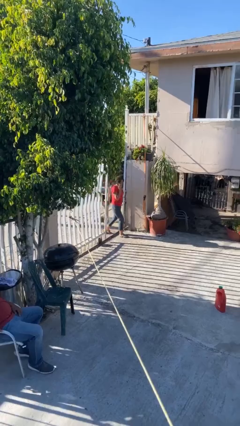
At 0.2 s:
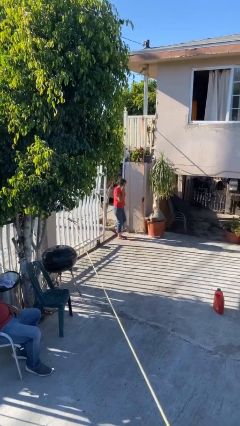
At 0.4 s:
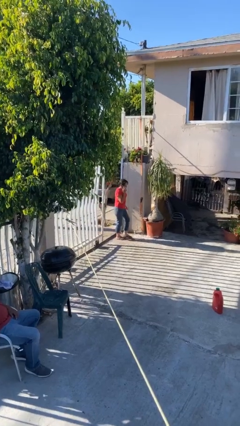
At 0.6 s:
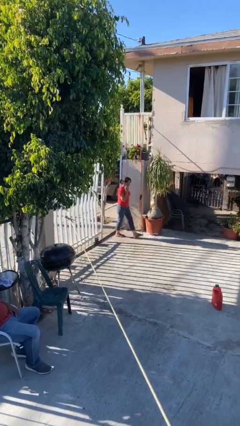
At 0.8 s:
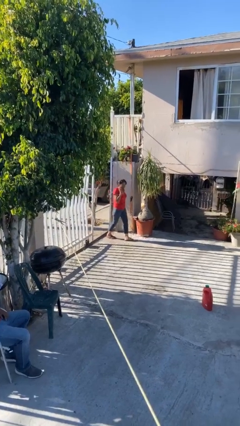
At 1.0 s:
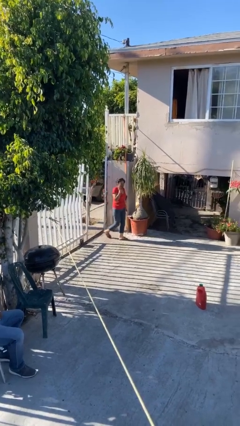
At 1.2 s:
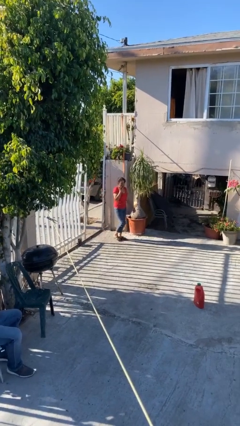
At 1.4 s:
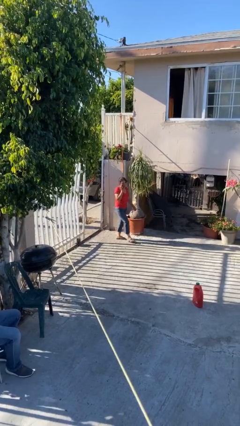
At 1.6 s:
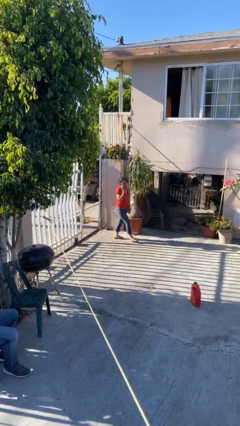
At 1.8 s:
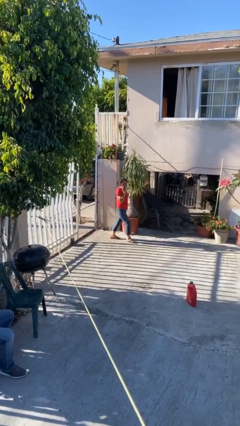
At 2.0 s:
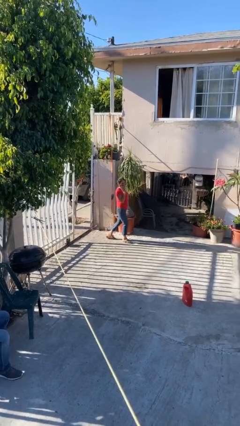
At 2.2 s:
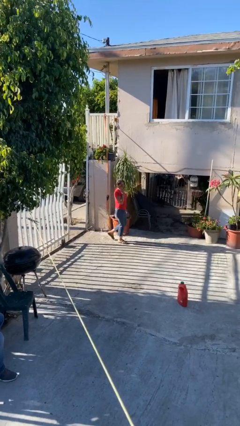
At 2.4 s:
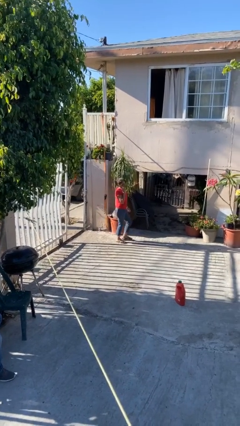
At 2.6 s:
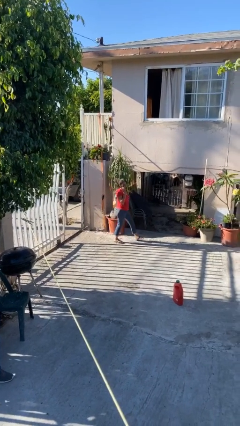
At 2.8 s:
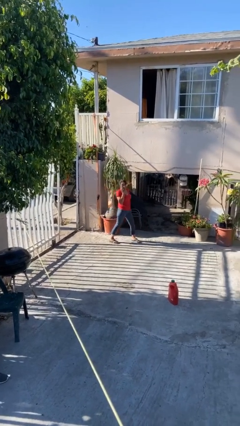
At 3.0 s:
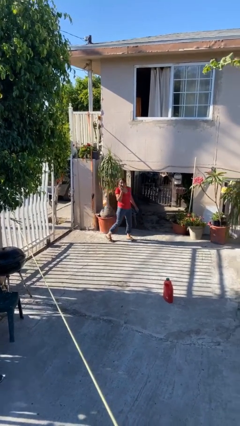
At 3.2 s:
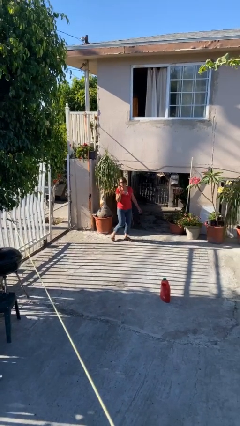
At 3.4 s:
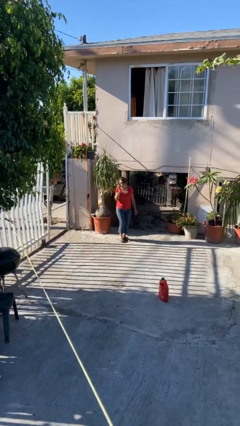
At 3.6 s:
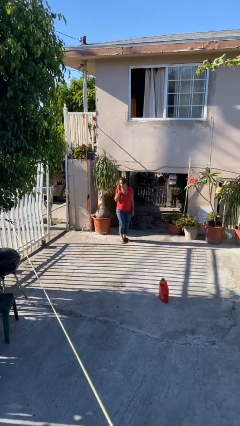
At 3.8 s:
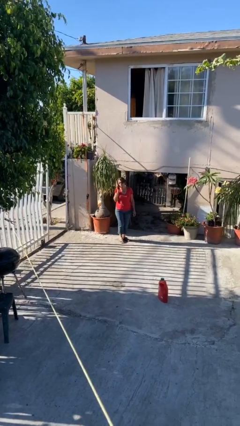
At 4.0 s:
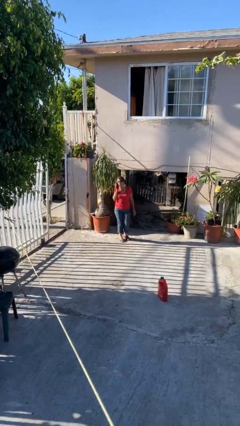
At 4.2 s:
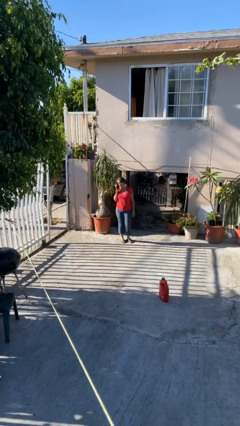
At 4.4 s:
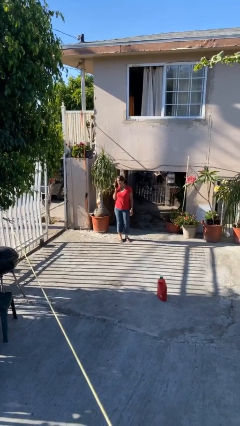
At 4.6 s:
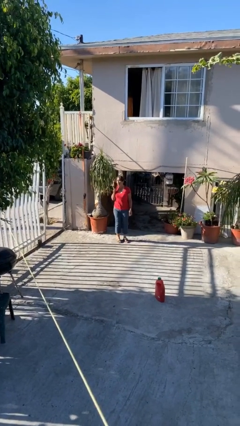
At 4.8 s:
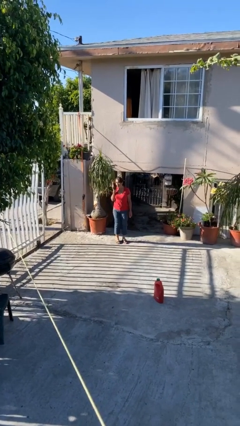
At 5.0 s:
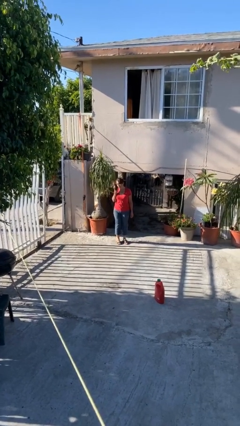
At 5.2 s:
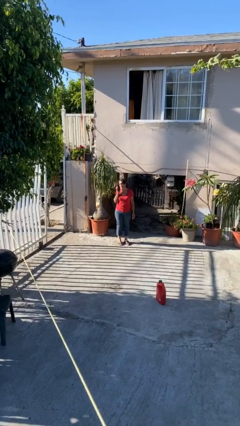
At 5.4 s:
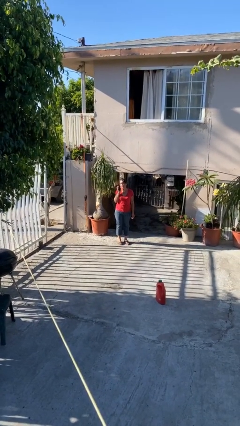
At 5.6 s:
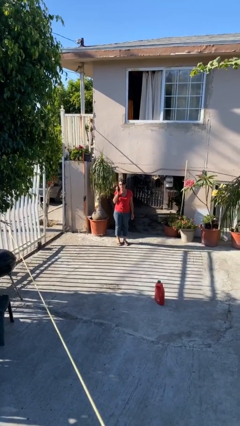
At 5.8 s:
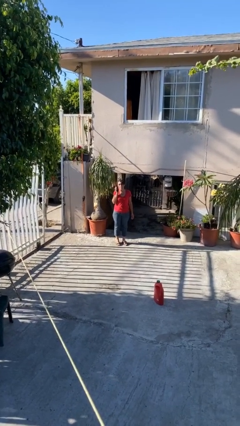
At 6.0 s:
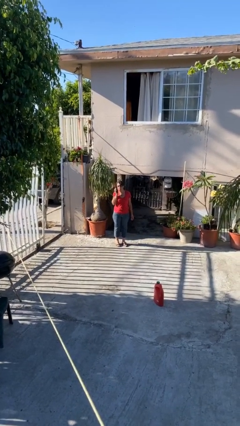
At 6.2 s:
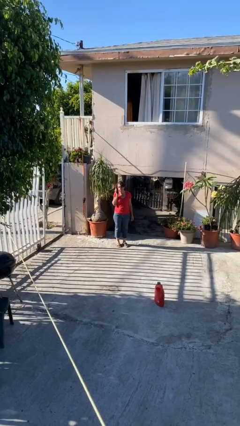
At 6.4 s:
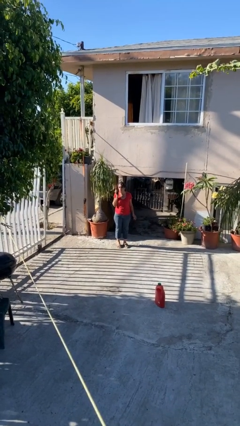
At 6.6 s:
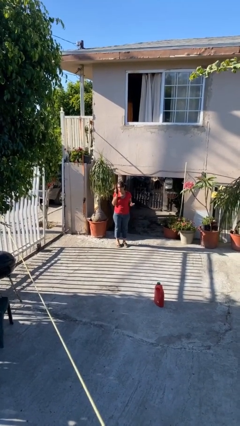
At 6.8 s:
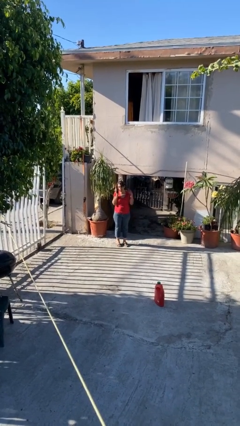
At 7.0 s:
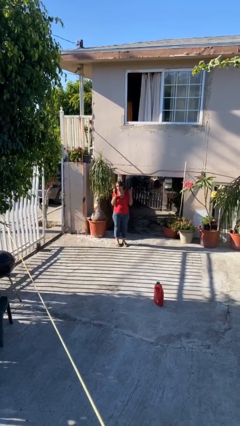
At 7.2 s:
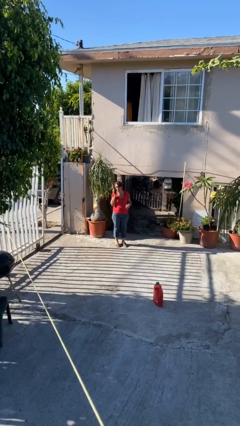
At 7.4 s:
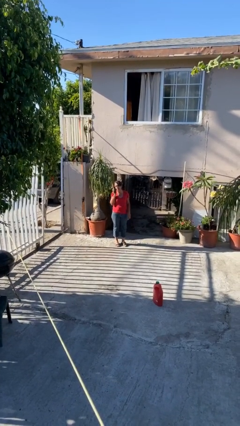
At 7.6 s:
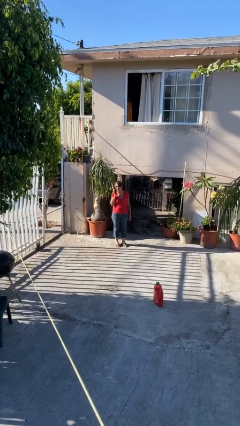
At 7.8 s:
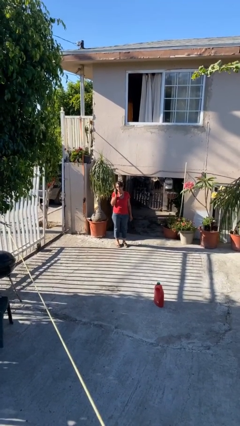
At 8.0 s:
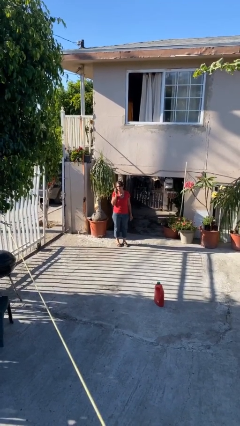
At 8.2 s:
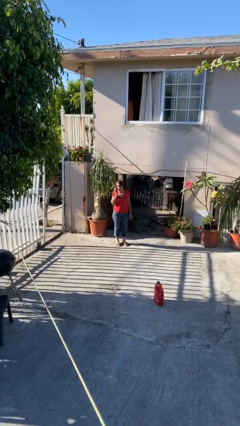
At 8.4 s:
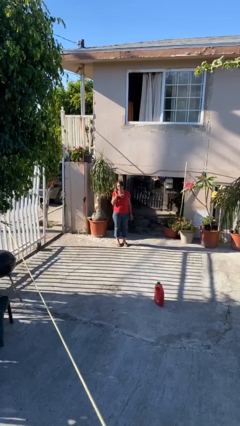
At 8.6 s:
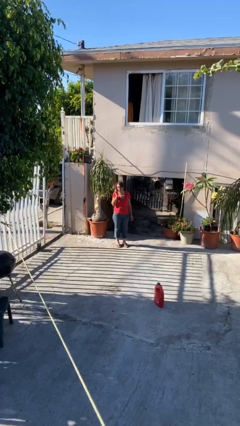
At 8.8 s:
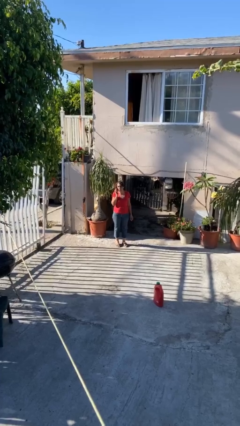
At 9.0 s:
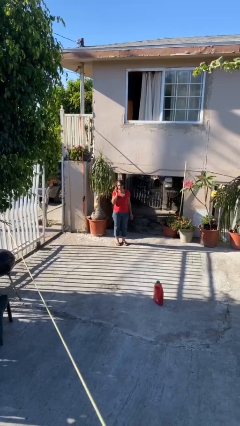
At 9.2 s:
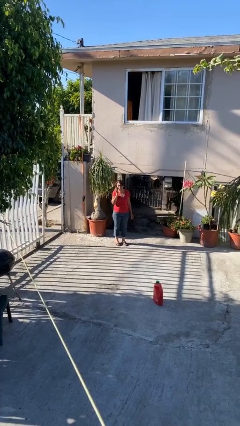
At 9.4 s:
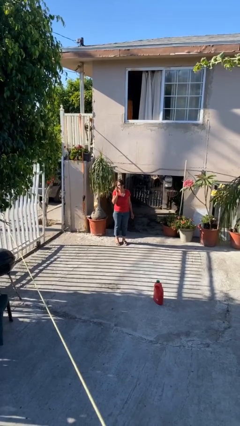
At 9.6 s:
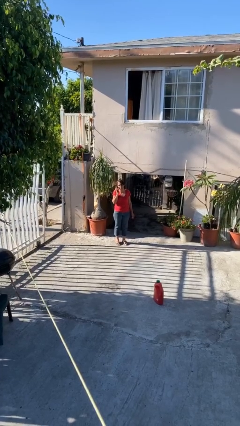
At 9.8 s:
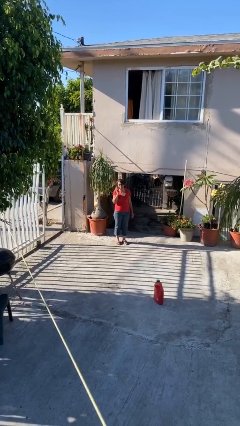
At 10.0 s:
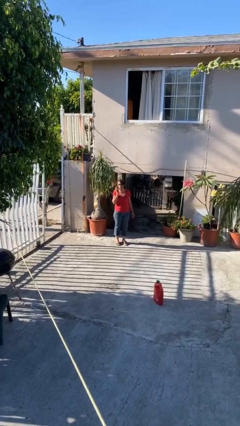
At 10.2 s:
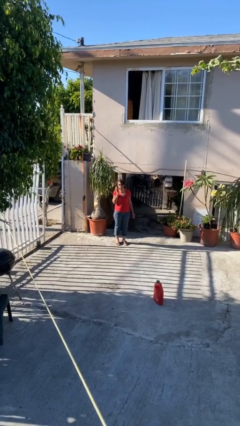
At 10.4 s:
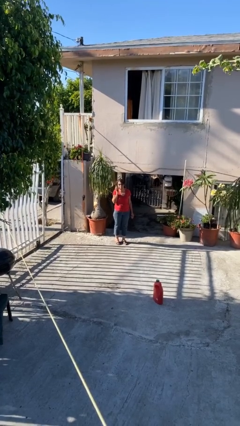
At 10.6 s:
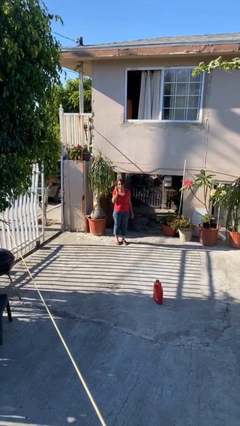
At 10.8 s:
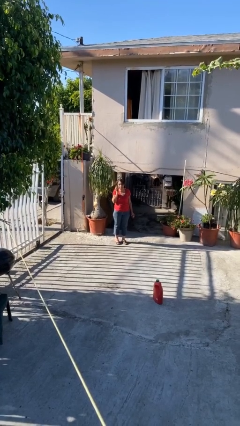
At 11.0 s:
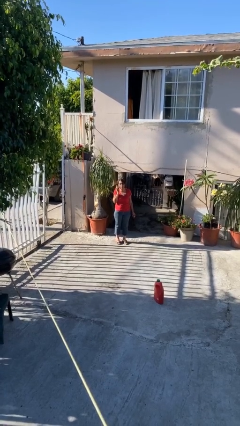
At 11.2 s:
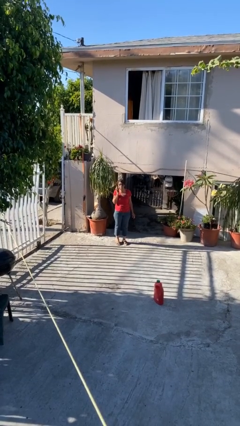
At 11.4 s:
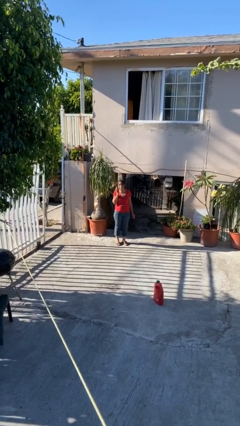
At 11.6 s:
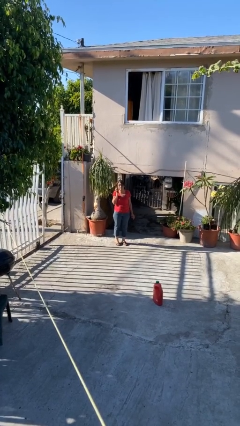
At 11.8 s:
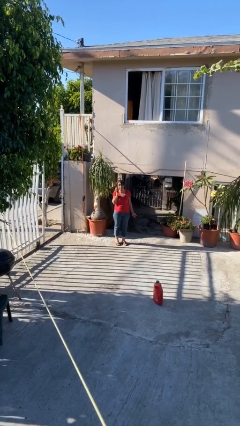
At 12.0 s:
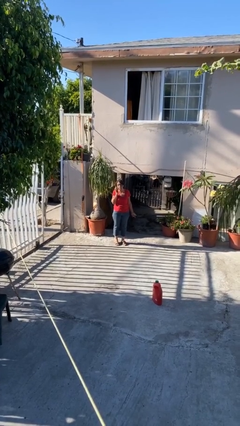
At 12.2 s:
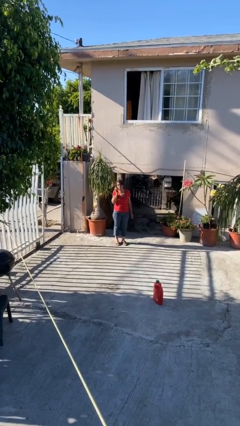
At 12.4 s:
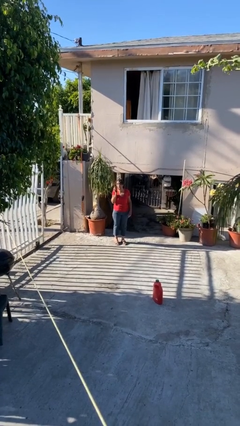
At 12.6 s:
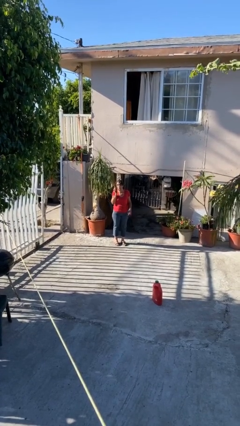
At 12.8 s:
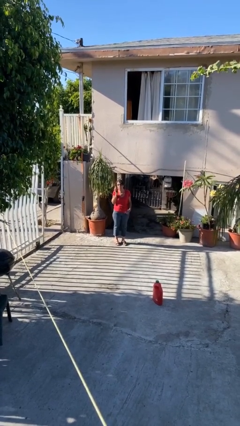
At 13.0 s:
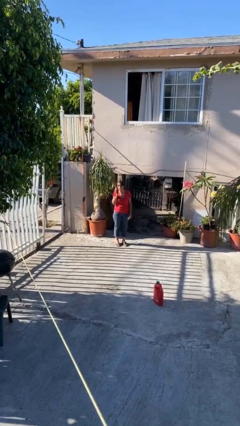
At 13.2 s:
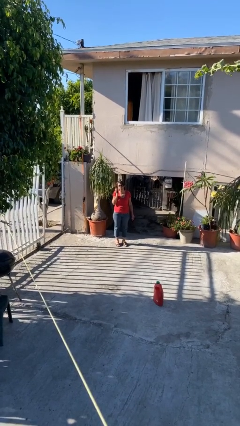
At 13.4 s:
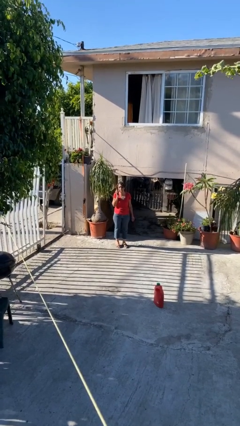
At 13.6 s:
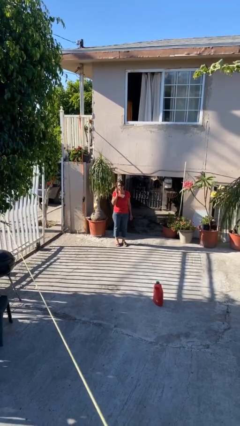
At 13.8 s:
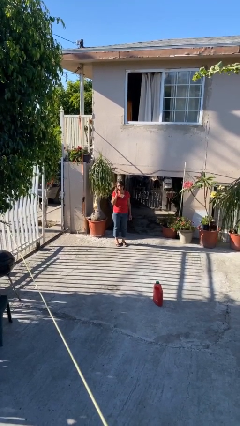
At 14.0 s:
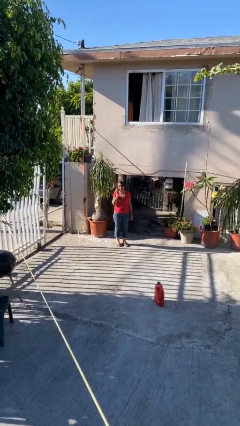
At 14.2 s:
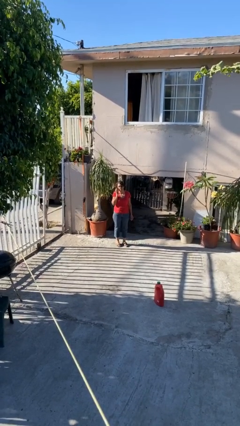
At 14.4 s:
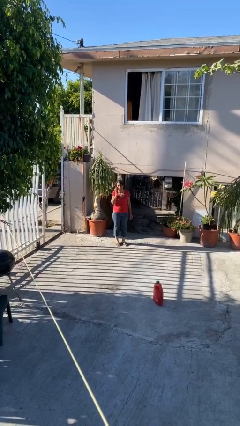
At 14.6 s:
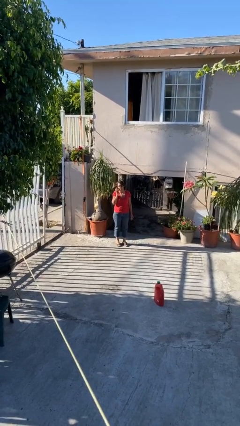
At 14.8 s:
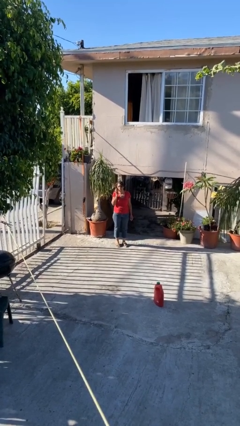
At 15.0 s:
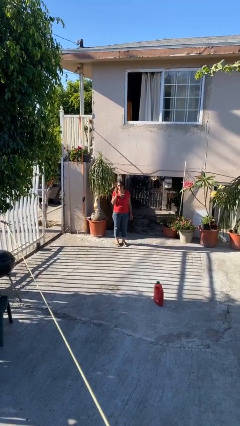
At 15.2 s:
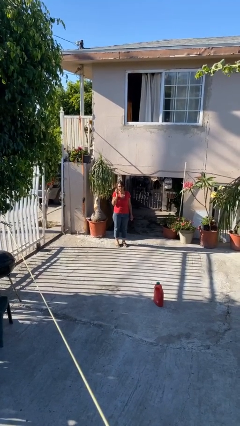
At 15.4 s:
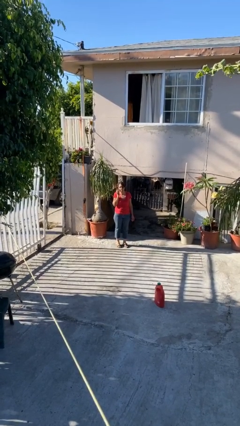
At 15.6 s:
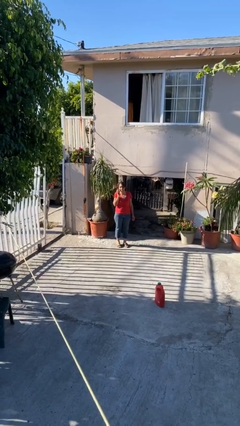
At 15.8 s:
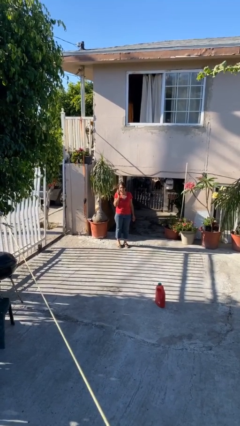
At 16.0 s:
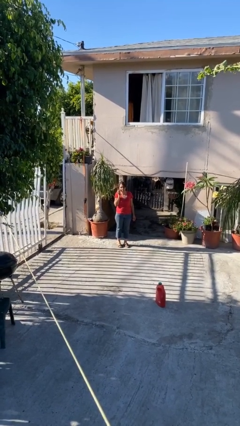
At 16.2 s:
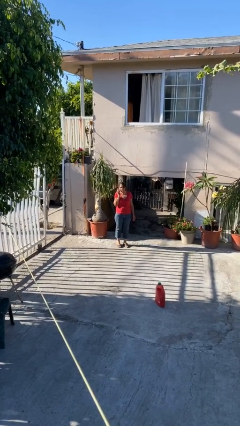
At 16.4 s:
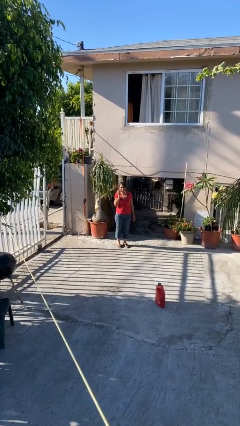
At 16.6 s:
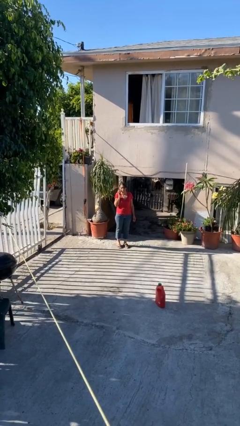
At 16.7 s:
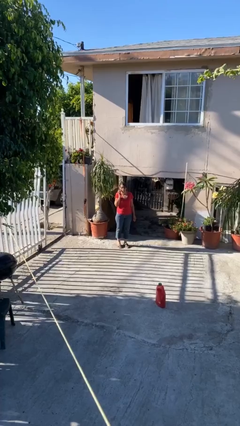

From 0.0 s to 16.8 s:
person enters scene through structure

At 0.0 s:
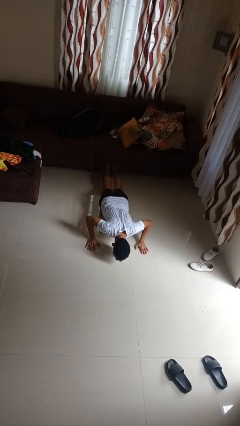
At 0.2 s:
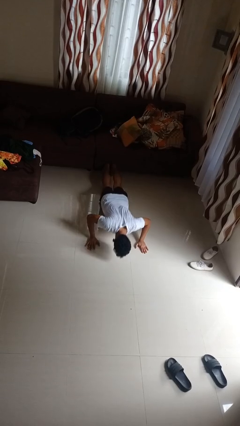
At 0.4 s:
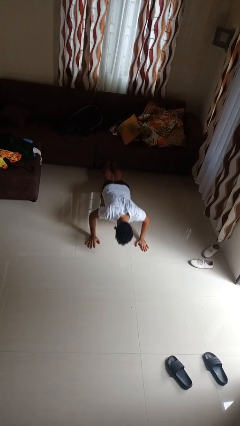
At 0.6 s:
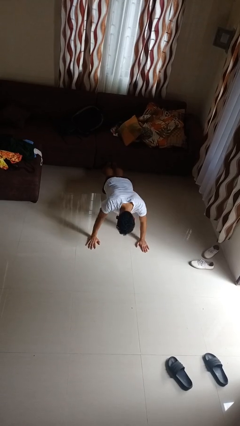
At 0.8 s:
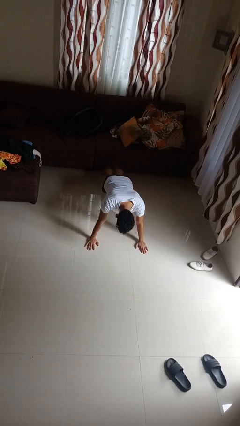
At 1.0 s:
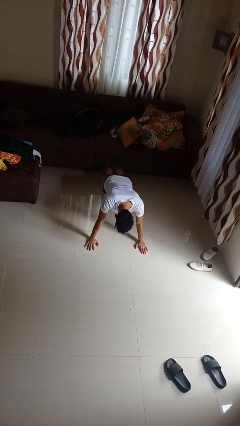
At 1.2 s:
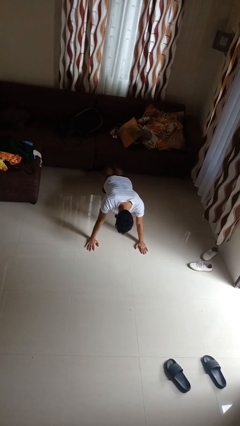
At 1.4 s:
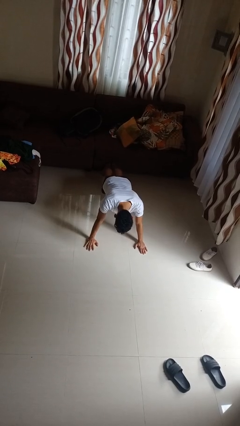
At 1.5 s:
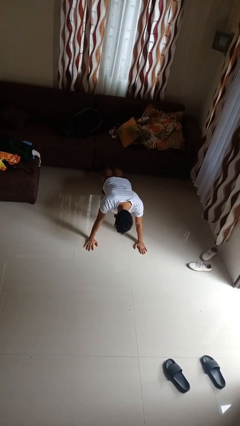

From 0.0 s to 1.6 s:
person exercises with pushup
